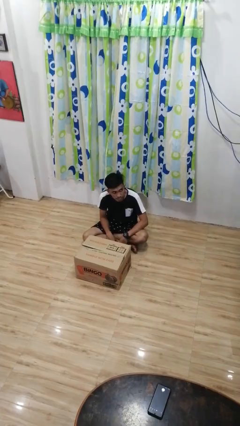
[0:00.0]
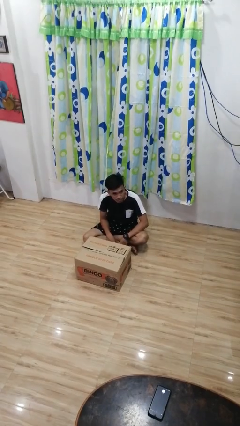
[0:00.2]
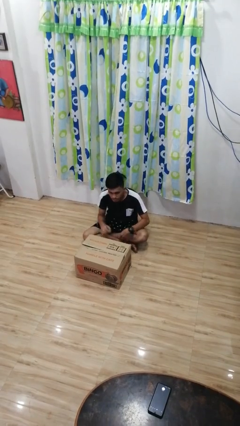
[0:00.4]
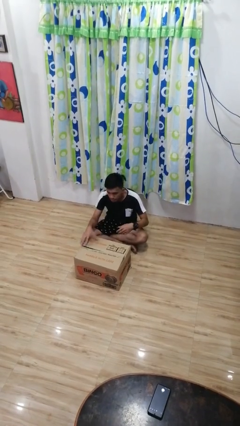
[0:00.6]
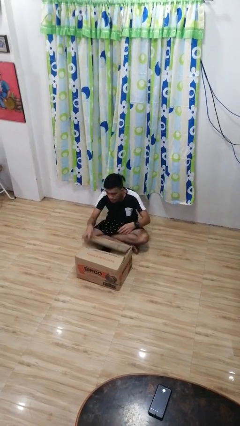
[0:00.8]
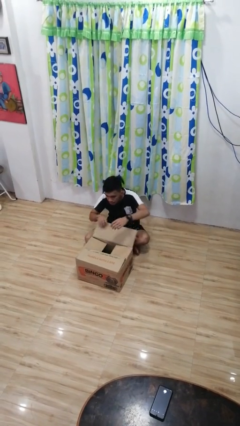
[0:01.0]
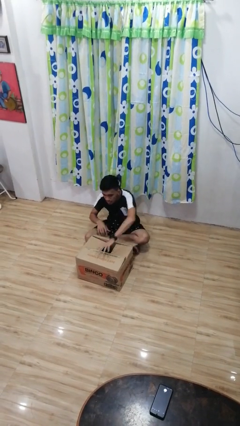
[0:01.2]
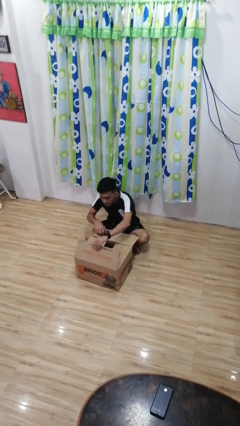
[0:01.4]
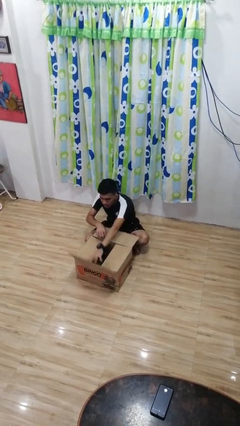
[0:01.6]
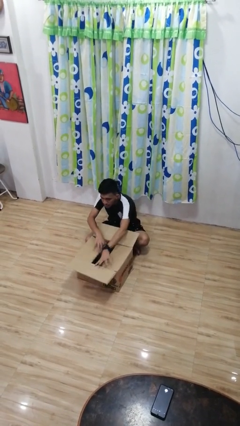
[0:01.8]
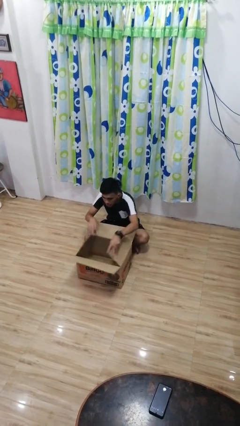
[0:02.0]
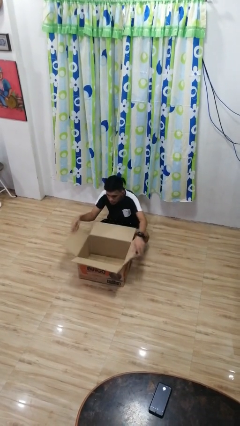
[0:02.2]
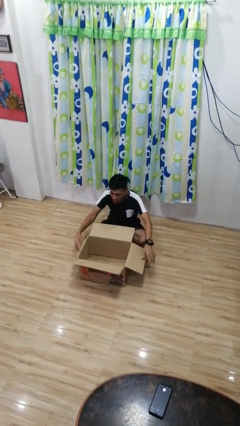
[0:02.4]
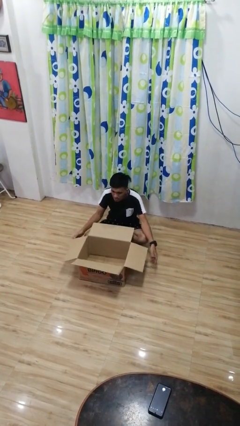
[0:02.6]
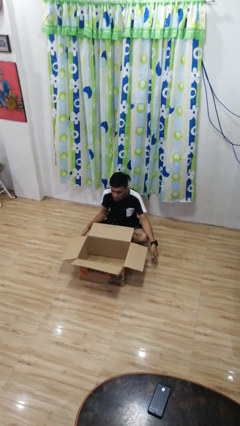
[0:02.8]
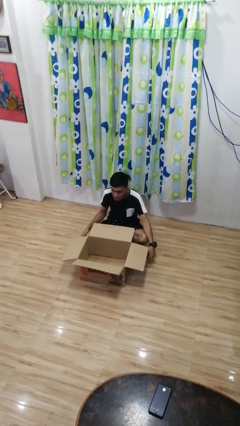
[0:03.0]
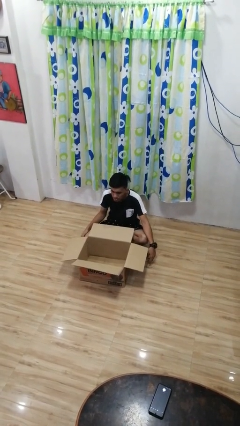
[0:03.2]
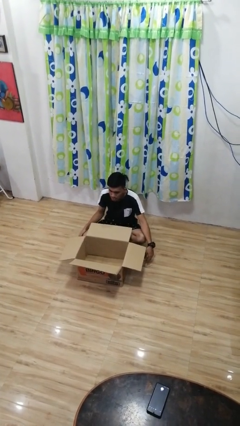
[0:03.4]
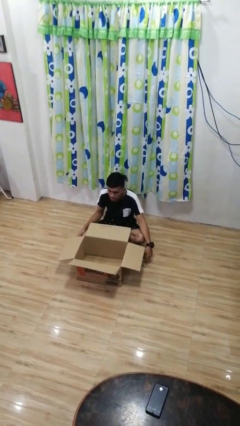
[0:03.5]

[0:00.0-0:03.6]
person opens box

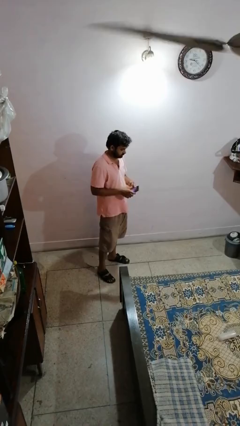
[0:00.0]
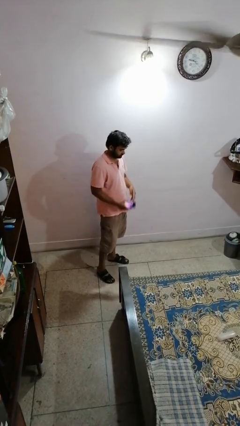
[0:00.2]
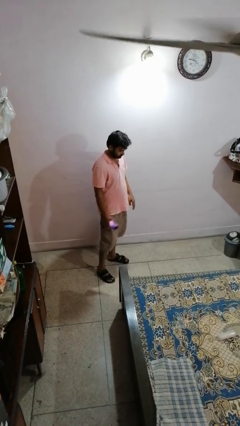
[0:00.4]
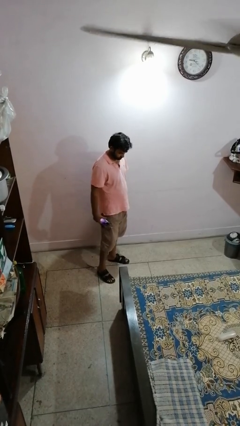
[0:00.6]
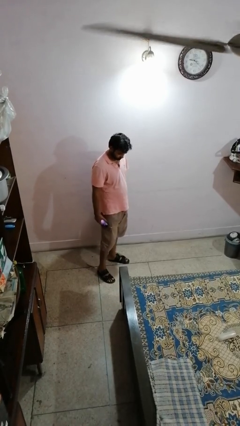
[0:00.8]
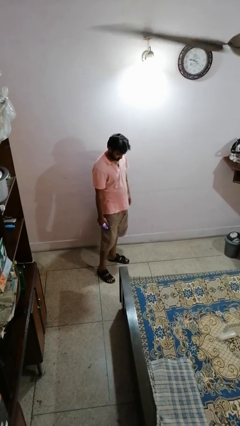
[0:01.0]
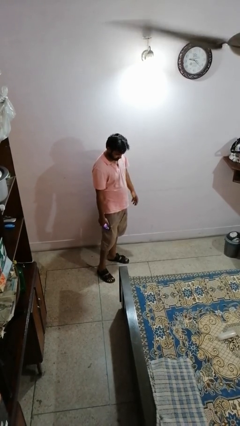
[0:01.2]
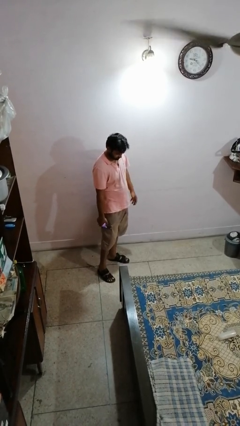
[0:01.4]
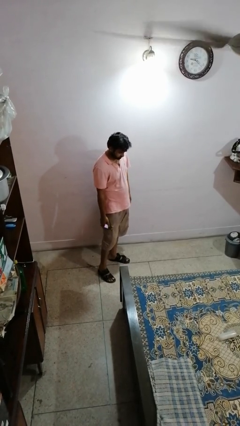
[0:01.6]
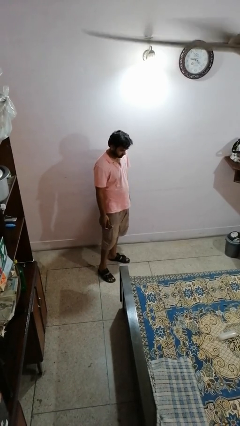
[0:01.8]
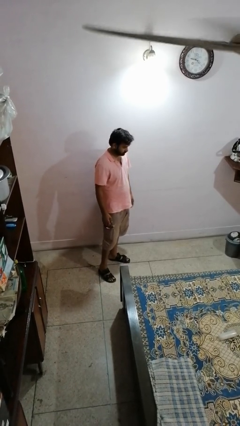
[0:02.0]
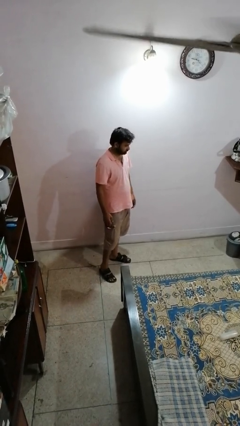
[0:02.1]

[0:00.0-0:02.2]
person puts phone into pocket

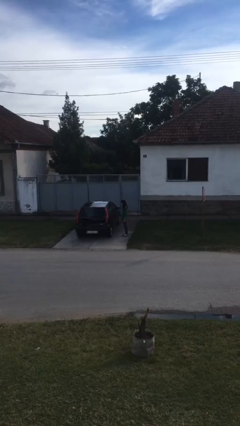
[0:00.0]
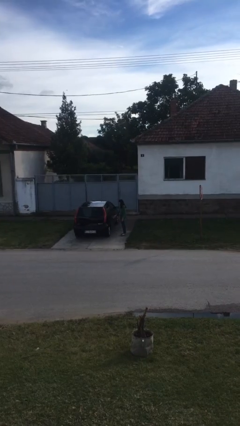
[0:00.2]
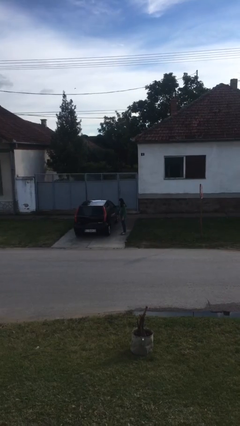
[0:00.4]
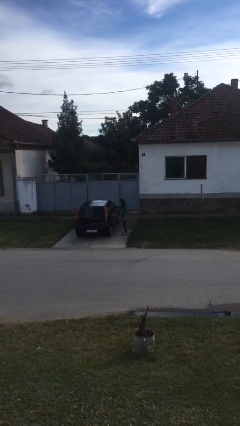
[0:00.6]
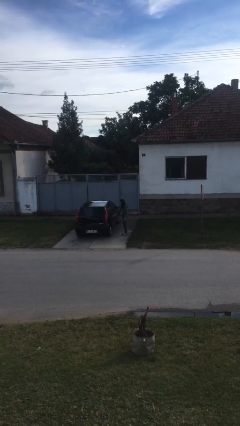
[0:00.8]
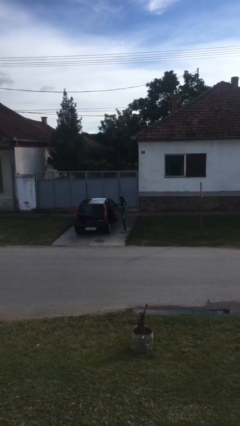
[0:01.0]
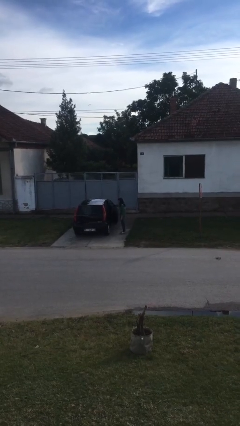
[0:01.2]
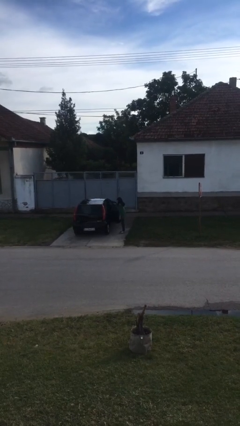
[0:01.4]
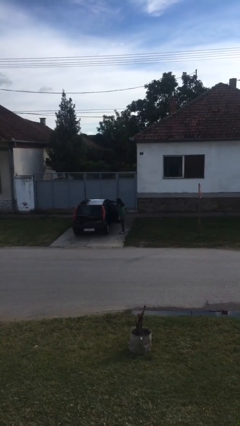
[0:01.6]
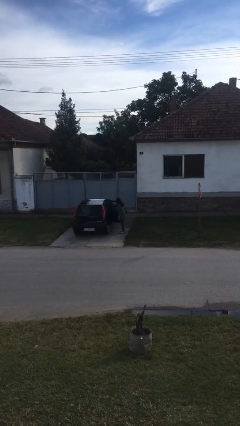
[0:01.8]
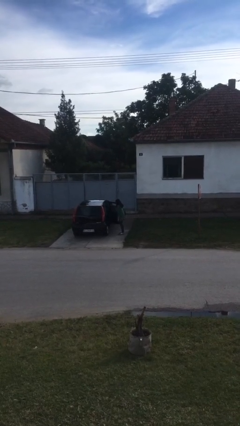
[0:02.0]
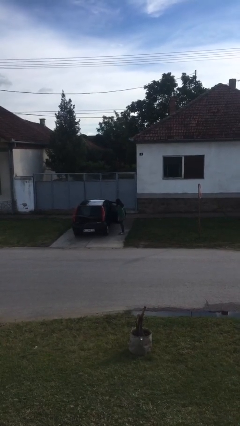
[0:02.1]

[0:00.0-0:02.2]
person opens car door

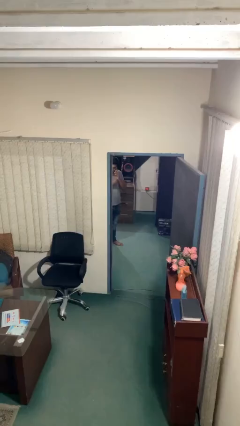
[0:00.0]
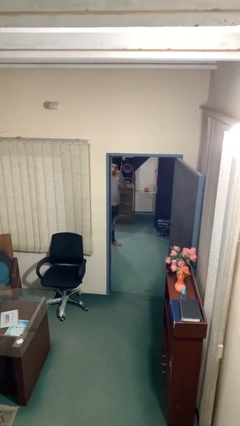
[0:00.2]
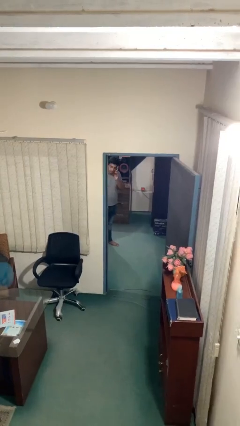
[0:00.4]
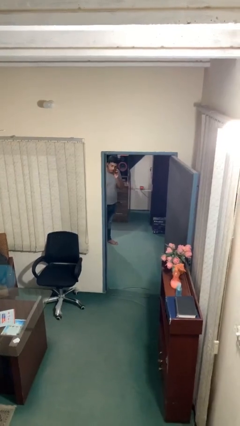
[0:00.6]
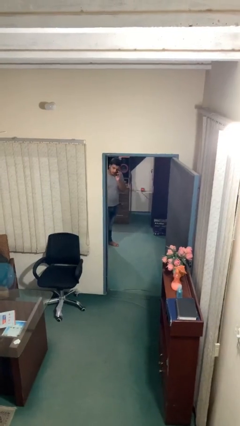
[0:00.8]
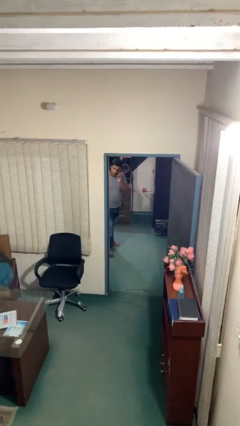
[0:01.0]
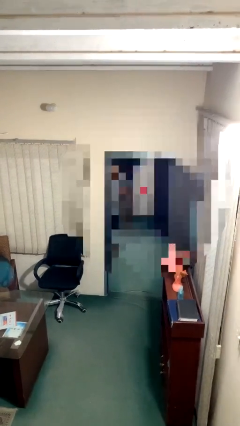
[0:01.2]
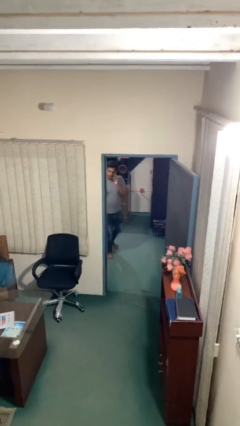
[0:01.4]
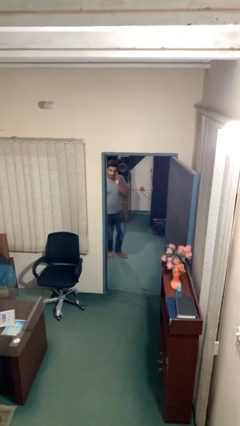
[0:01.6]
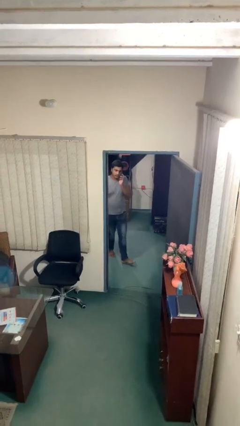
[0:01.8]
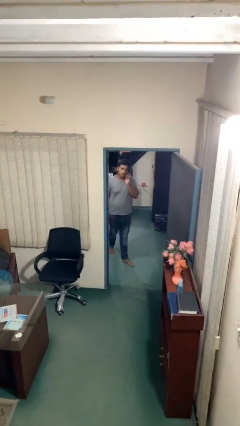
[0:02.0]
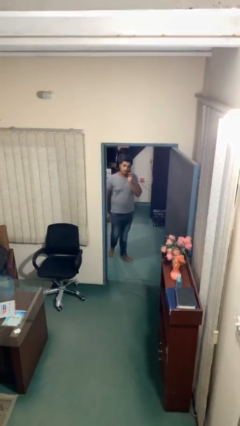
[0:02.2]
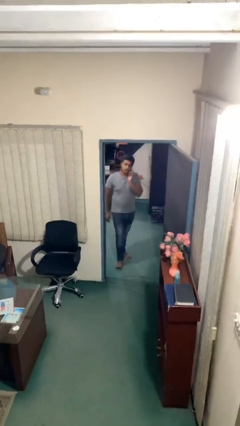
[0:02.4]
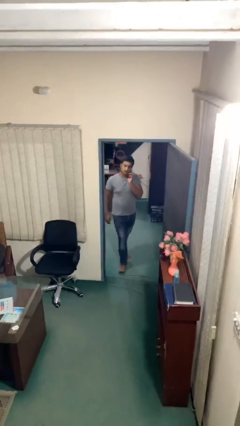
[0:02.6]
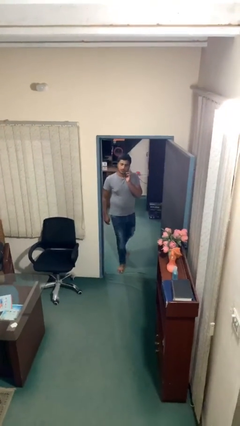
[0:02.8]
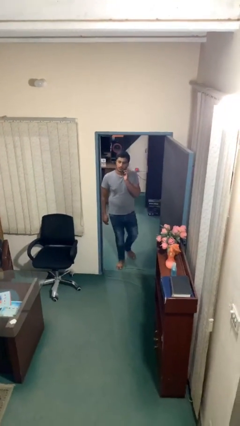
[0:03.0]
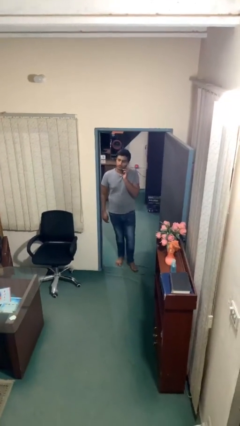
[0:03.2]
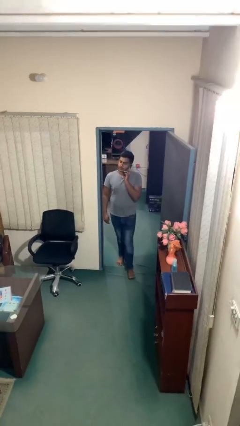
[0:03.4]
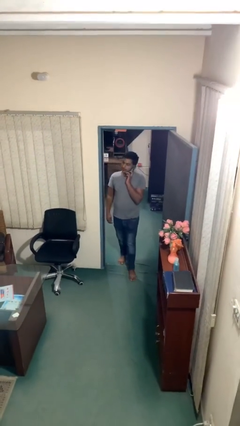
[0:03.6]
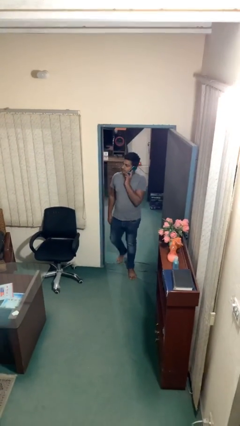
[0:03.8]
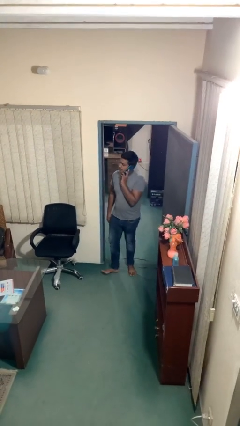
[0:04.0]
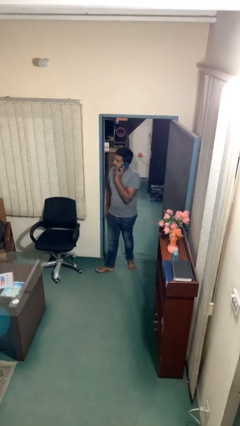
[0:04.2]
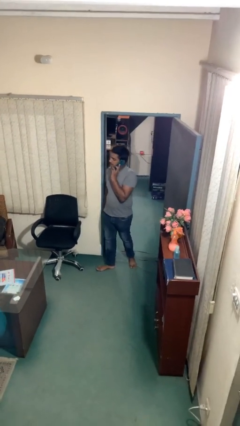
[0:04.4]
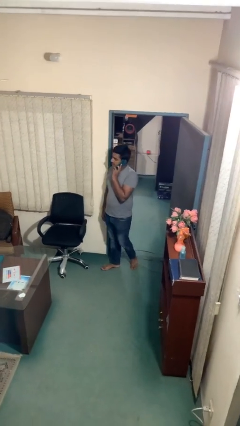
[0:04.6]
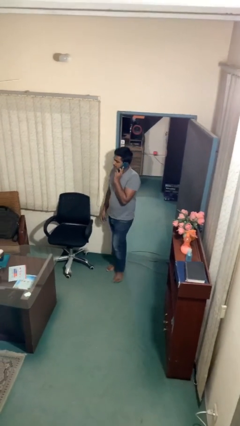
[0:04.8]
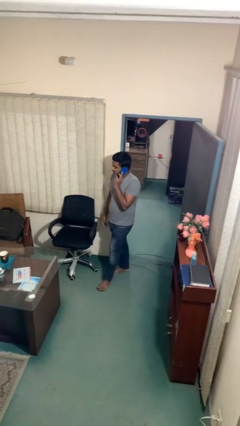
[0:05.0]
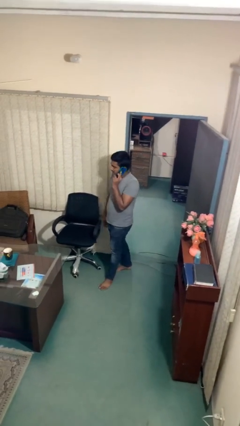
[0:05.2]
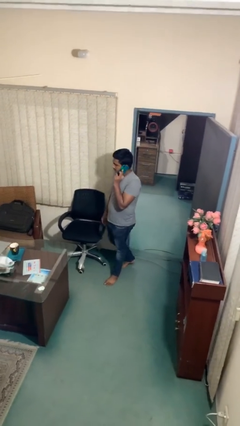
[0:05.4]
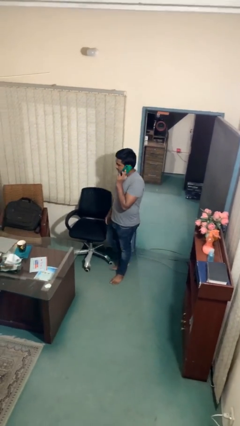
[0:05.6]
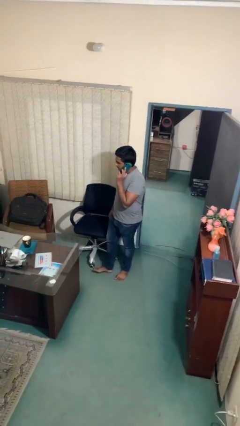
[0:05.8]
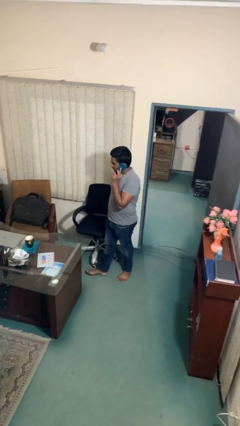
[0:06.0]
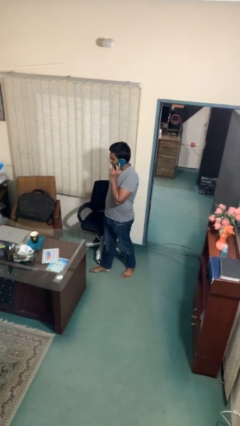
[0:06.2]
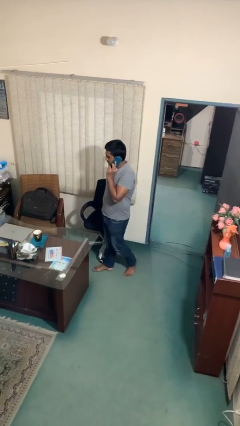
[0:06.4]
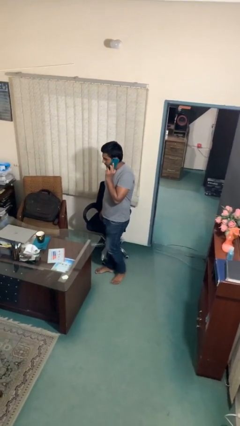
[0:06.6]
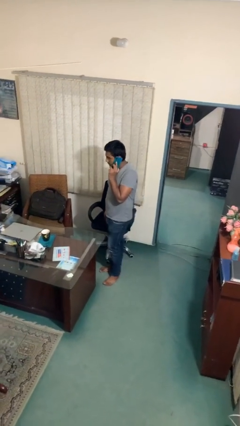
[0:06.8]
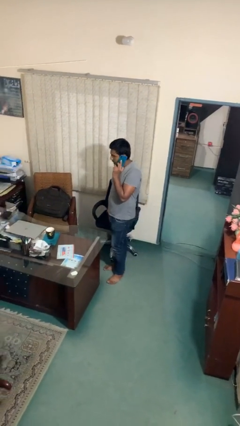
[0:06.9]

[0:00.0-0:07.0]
person enters scene through structure

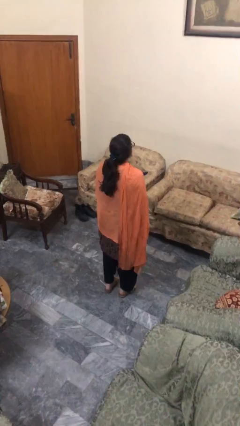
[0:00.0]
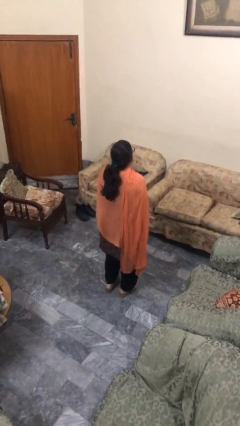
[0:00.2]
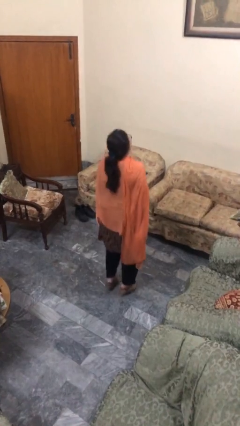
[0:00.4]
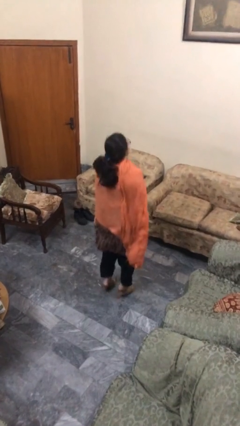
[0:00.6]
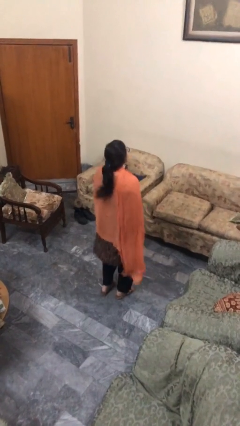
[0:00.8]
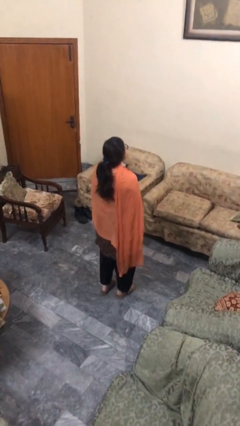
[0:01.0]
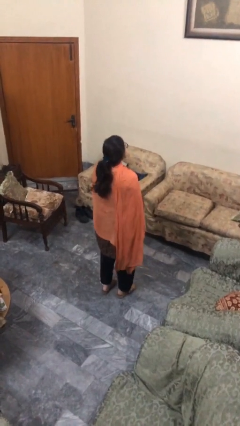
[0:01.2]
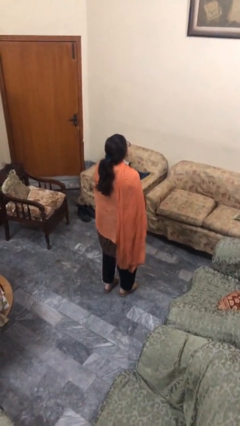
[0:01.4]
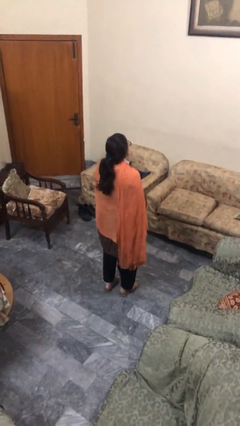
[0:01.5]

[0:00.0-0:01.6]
person jumps

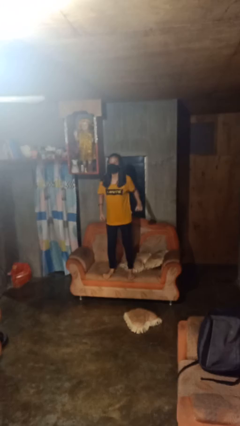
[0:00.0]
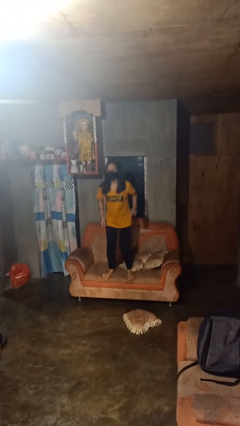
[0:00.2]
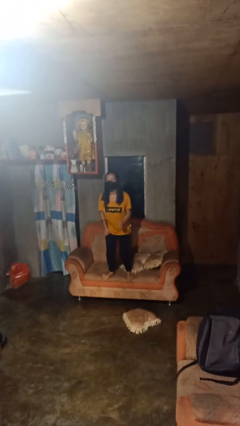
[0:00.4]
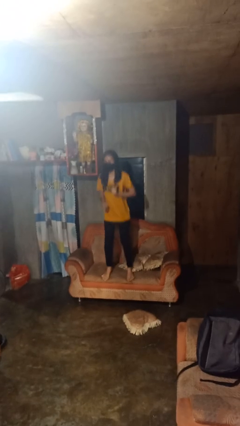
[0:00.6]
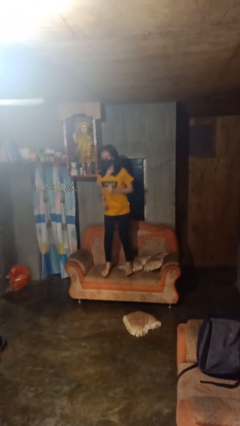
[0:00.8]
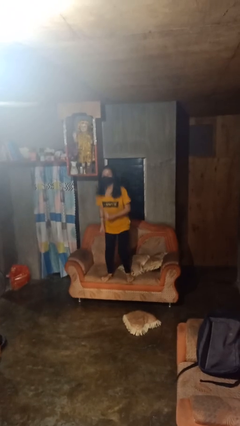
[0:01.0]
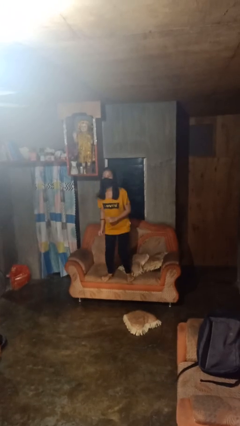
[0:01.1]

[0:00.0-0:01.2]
person jumps on couch
